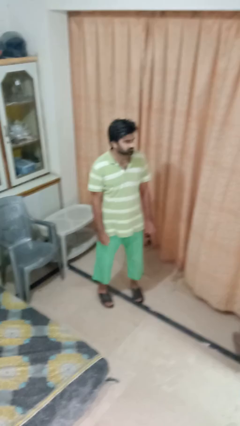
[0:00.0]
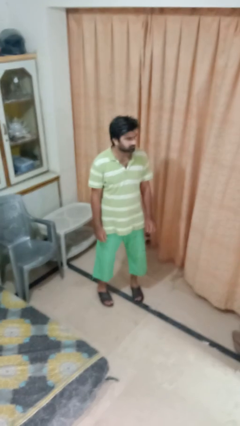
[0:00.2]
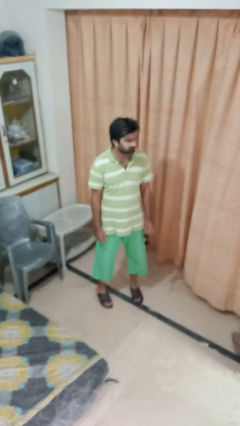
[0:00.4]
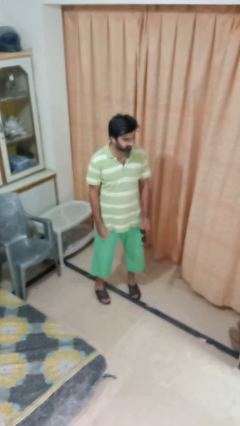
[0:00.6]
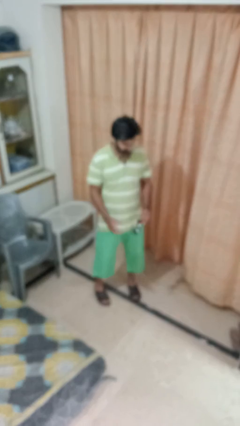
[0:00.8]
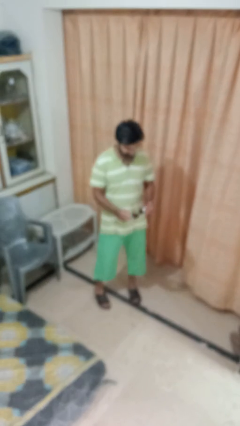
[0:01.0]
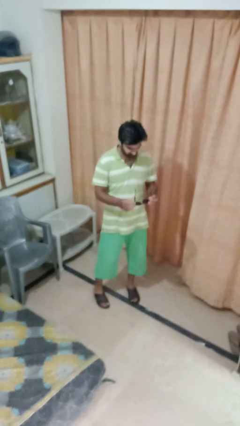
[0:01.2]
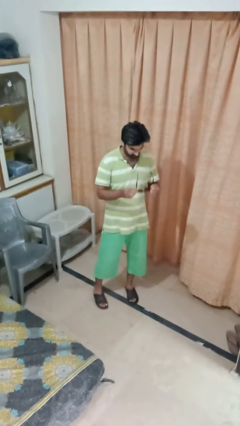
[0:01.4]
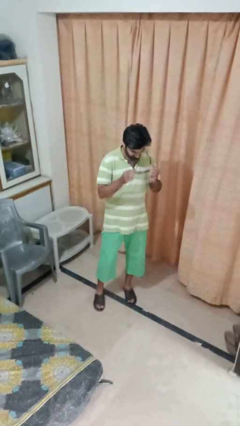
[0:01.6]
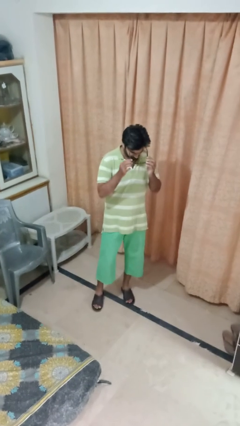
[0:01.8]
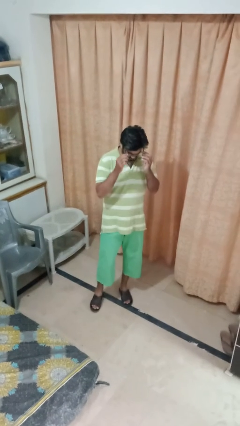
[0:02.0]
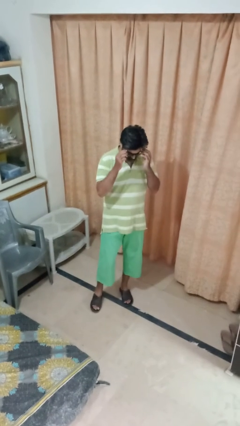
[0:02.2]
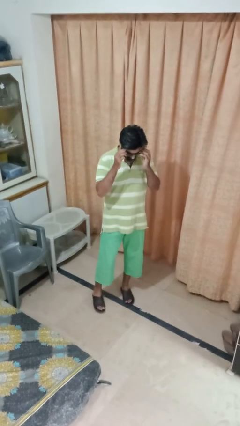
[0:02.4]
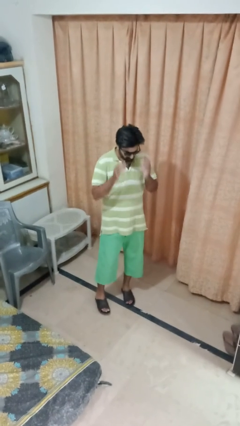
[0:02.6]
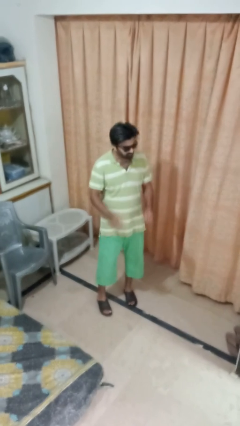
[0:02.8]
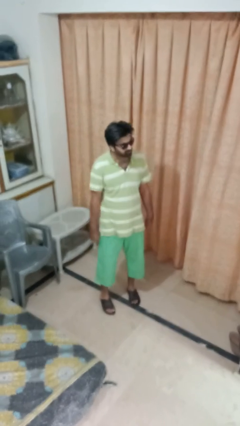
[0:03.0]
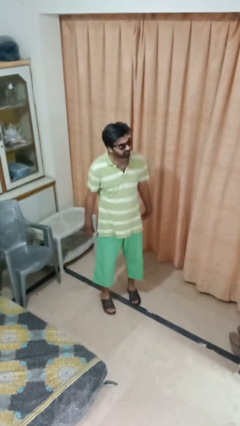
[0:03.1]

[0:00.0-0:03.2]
person puts on sunglasses

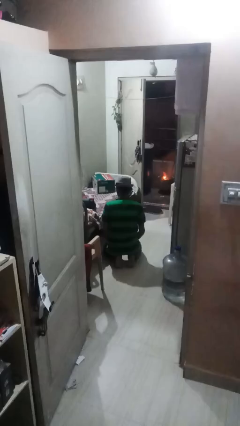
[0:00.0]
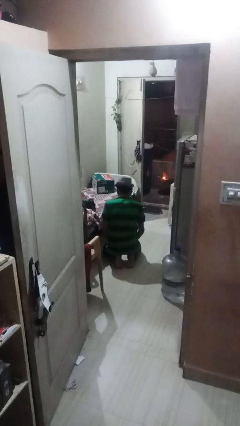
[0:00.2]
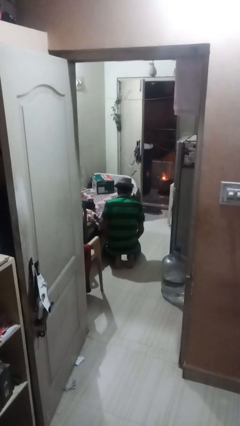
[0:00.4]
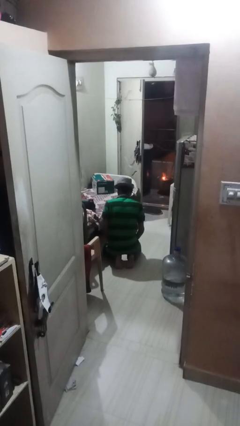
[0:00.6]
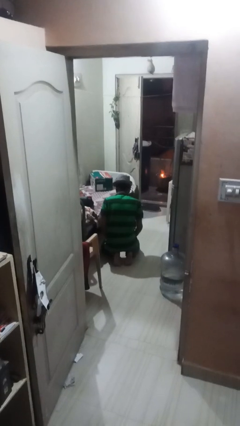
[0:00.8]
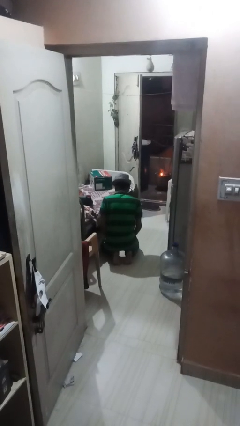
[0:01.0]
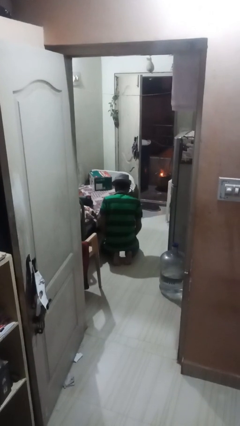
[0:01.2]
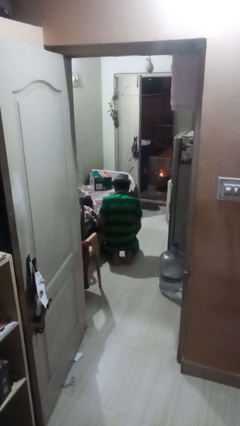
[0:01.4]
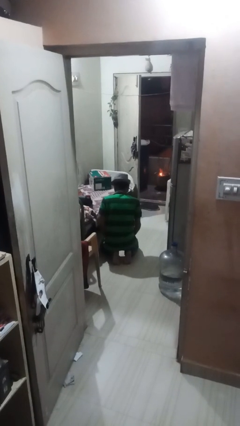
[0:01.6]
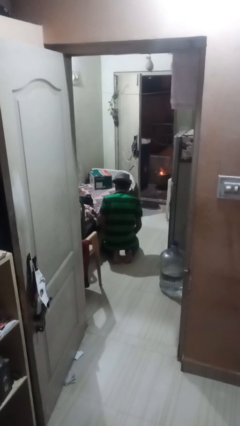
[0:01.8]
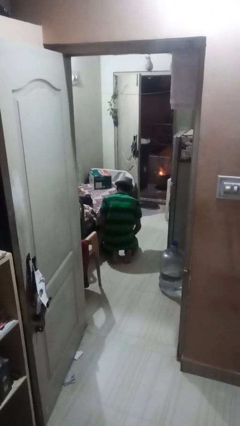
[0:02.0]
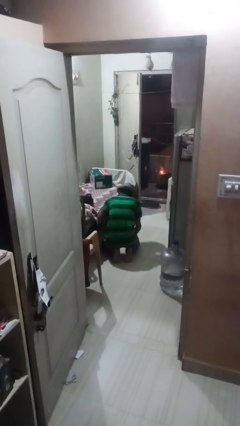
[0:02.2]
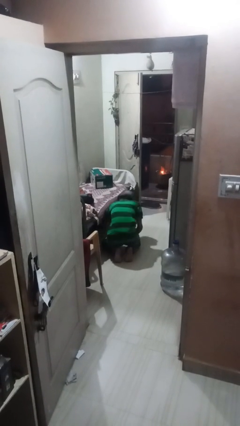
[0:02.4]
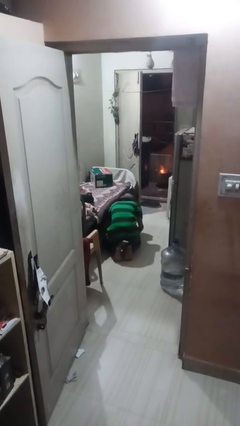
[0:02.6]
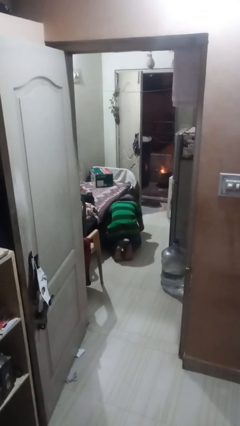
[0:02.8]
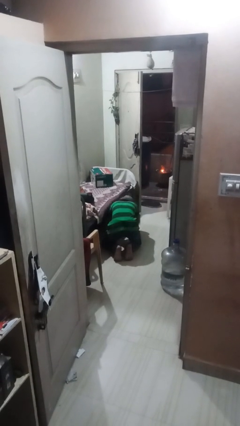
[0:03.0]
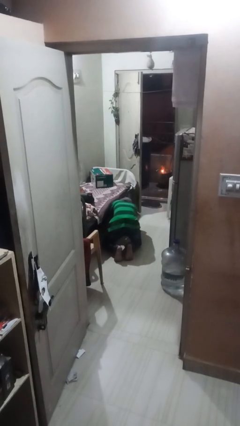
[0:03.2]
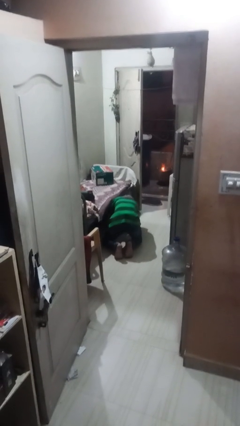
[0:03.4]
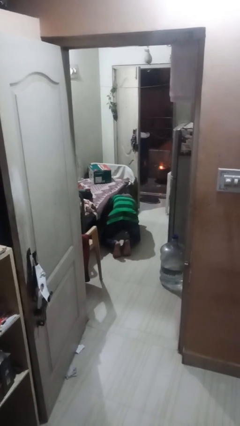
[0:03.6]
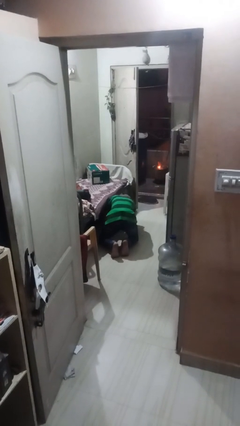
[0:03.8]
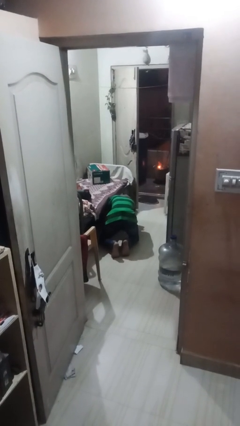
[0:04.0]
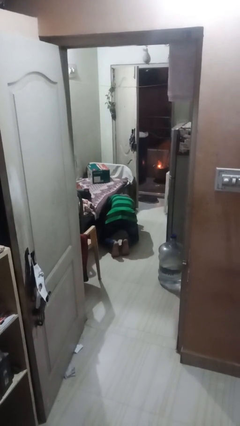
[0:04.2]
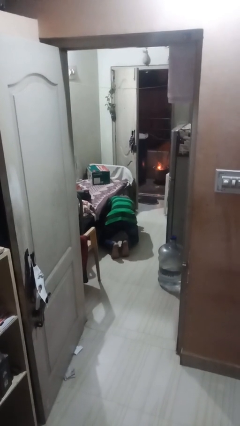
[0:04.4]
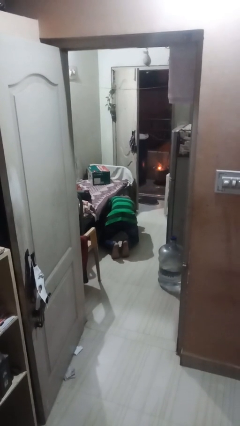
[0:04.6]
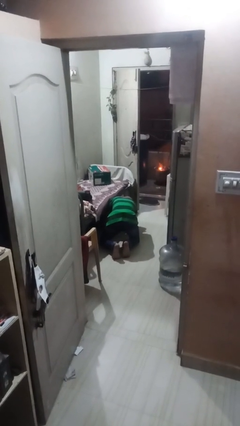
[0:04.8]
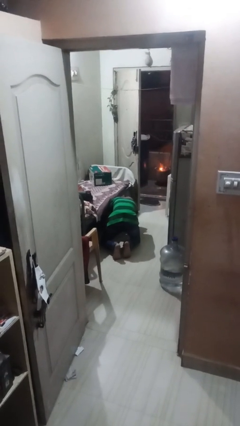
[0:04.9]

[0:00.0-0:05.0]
person searches under bed

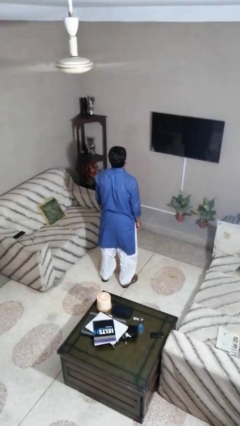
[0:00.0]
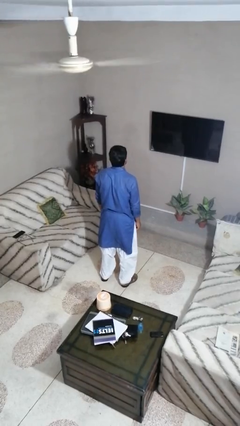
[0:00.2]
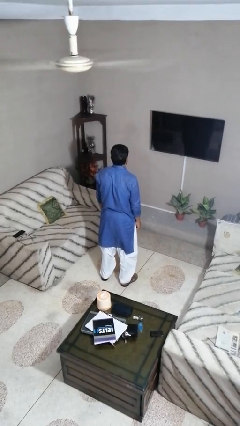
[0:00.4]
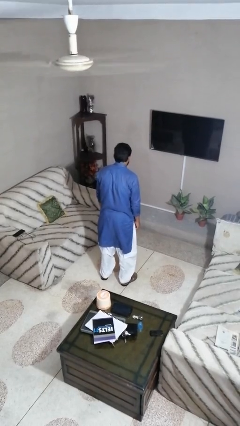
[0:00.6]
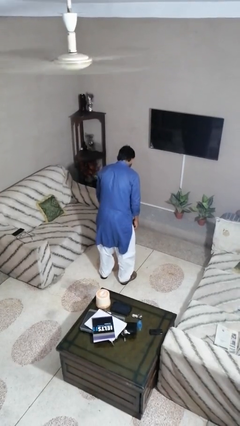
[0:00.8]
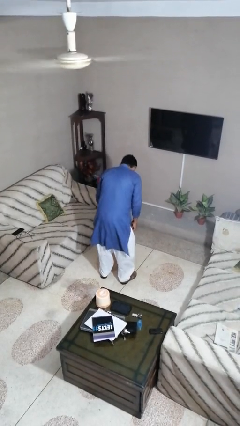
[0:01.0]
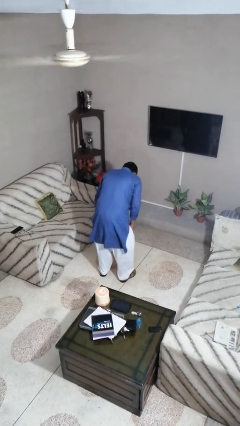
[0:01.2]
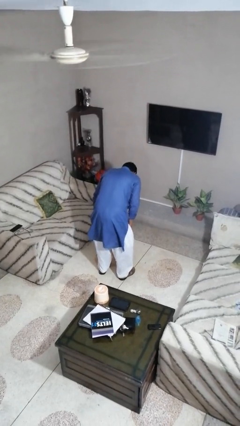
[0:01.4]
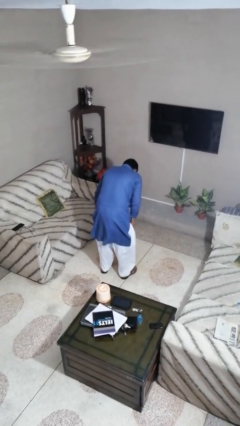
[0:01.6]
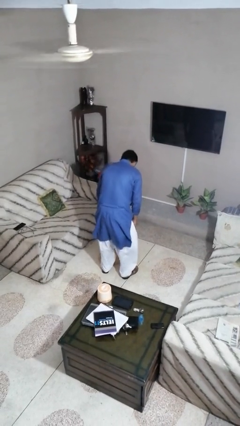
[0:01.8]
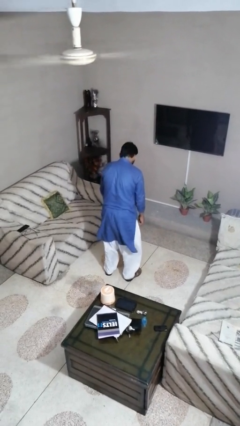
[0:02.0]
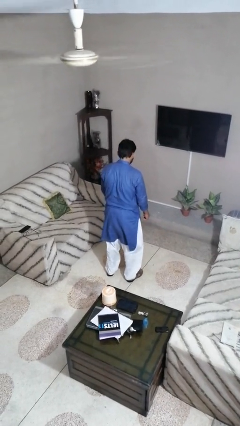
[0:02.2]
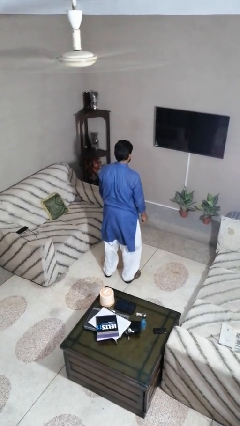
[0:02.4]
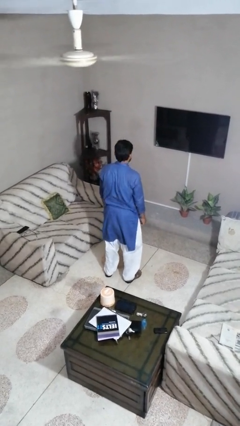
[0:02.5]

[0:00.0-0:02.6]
person bows

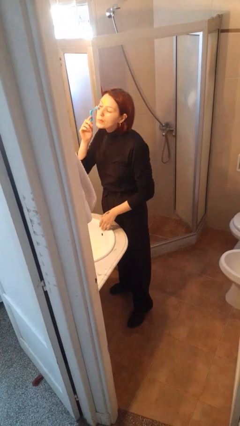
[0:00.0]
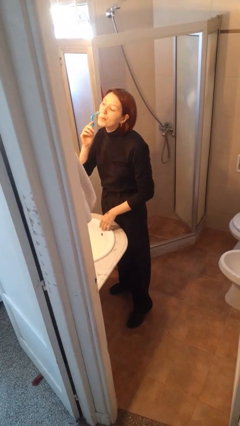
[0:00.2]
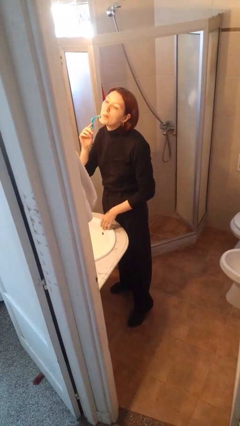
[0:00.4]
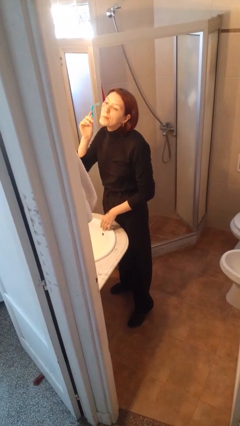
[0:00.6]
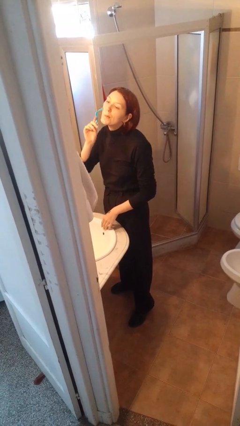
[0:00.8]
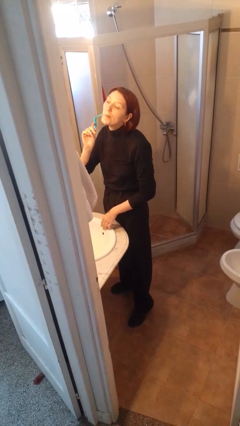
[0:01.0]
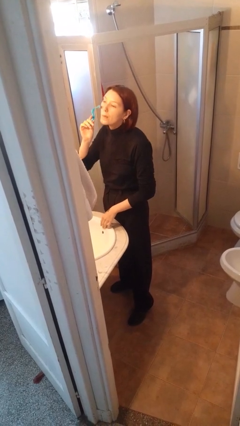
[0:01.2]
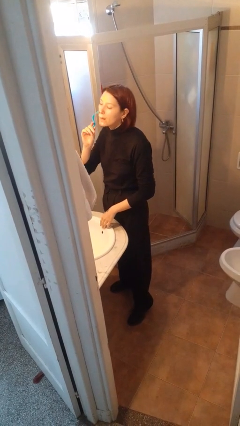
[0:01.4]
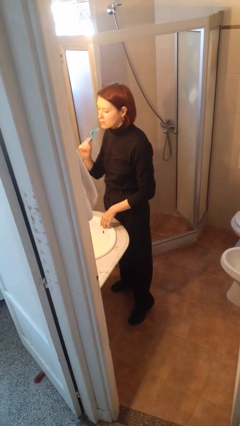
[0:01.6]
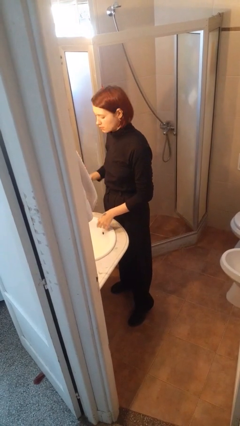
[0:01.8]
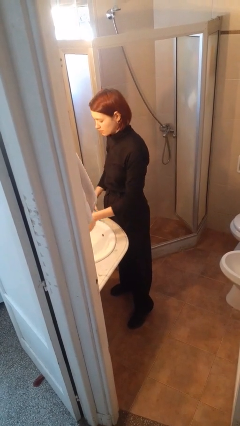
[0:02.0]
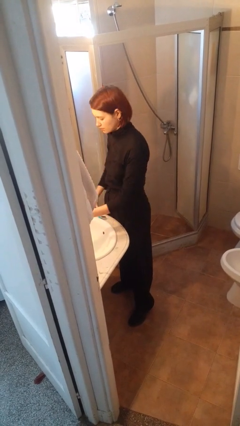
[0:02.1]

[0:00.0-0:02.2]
person shaves face

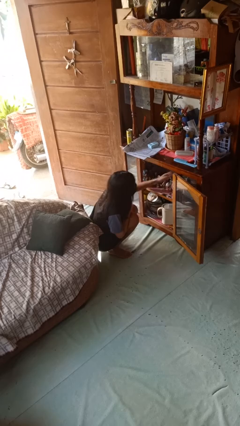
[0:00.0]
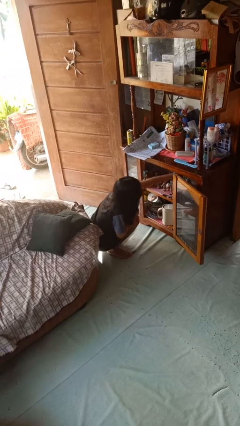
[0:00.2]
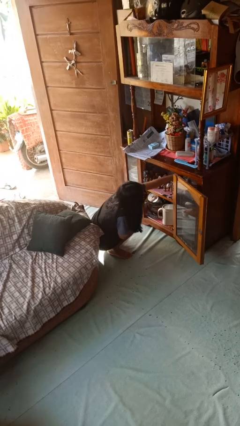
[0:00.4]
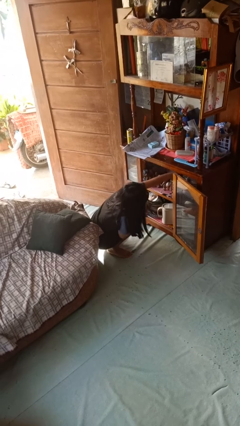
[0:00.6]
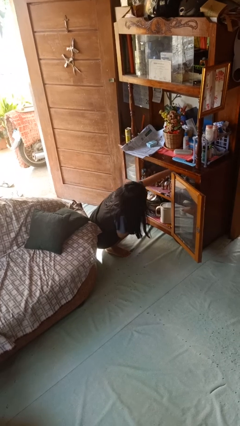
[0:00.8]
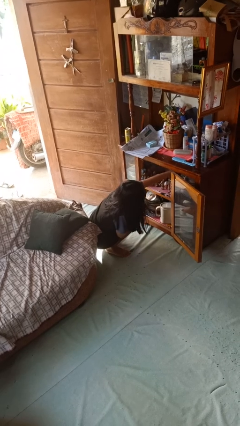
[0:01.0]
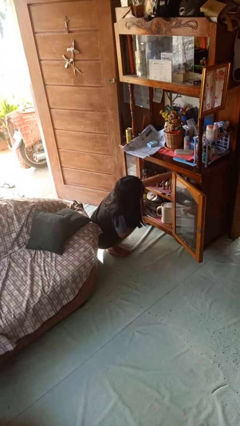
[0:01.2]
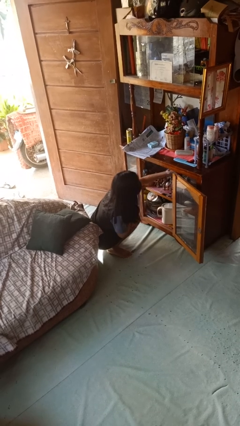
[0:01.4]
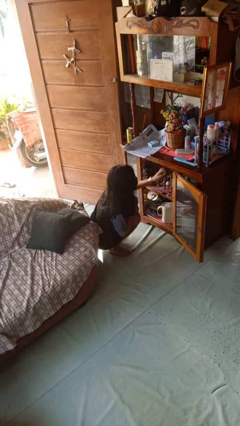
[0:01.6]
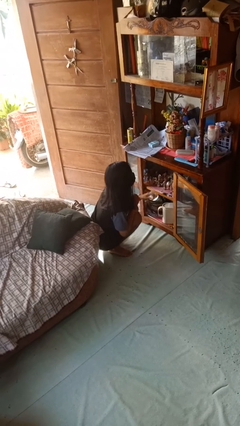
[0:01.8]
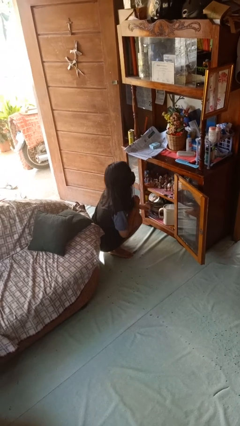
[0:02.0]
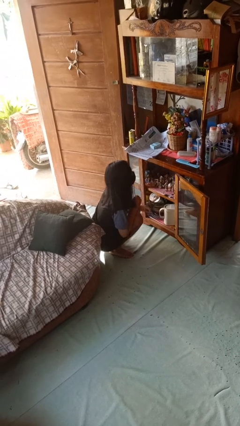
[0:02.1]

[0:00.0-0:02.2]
person searches in cabinet

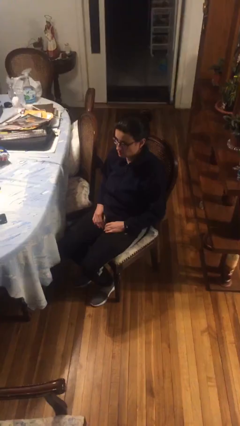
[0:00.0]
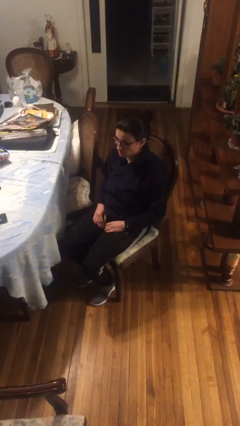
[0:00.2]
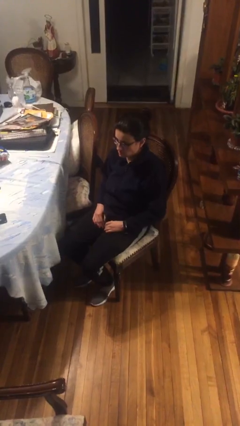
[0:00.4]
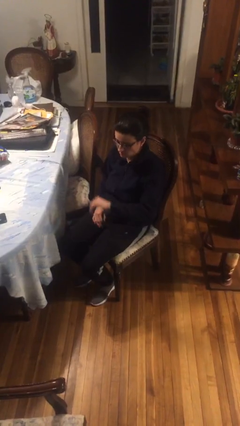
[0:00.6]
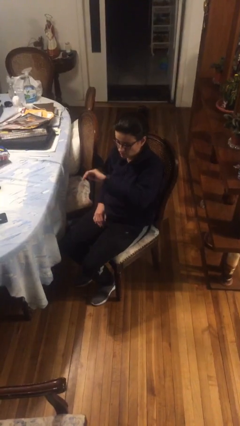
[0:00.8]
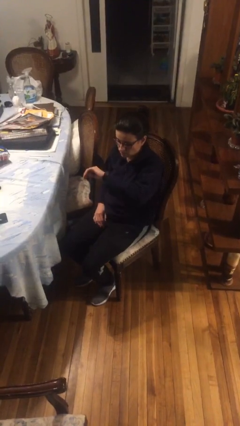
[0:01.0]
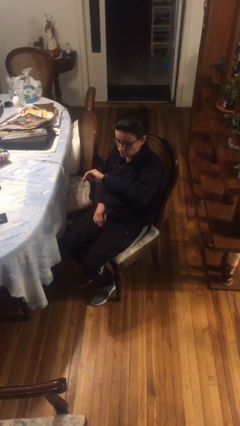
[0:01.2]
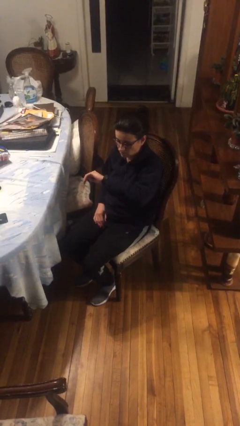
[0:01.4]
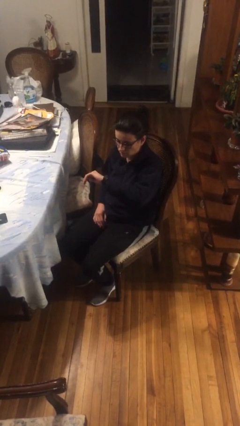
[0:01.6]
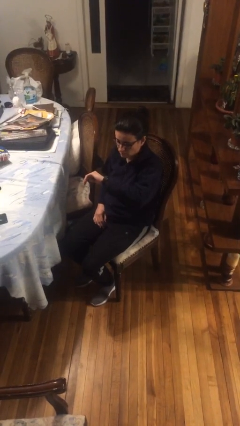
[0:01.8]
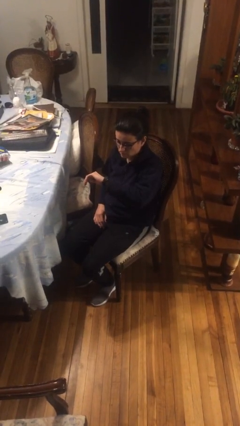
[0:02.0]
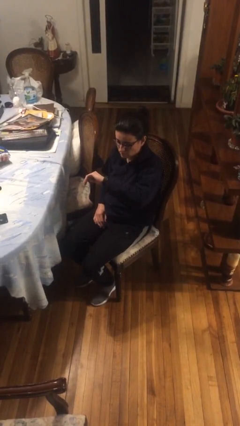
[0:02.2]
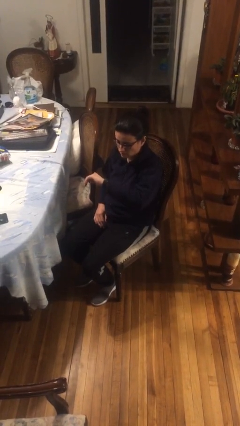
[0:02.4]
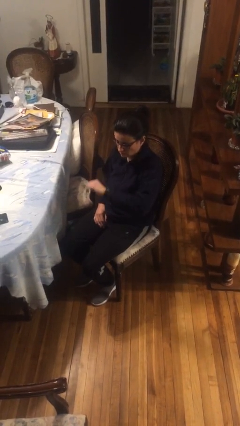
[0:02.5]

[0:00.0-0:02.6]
person looks at wristwatch
